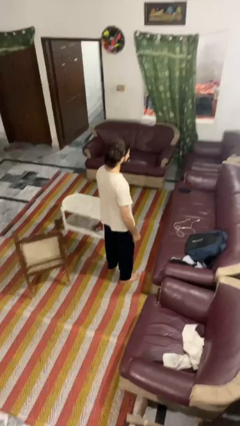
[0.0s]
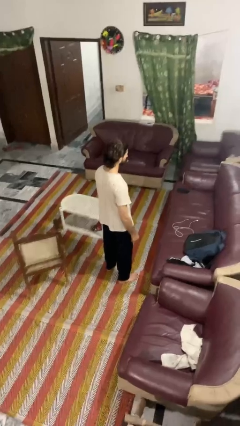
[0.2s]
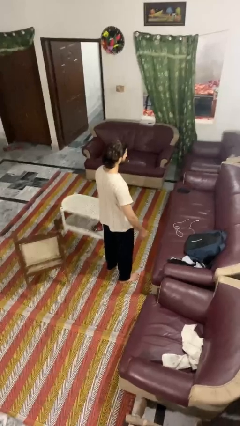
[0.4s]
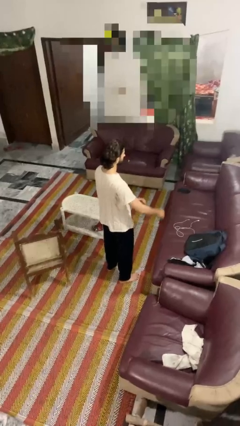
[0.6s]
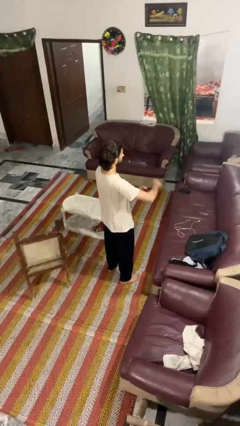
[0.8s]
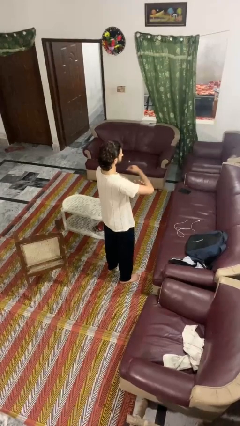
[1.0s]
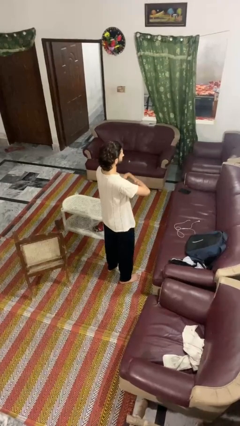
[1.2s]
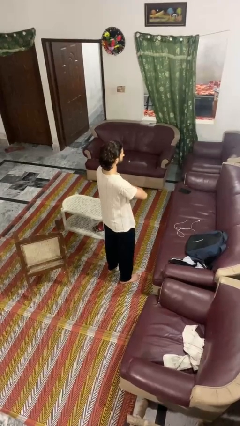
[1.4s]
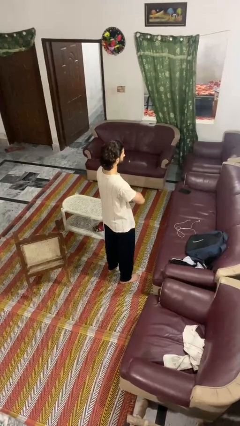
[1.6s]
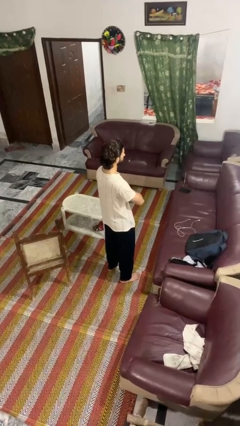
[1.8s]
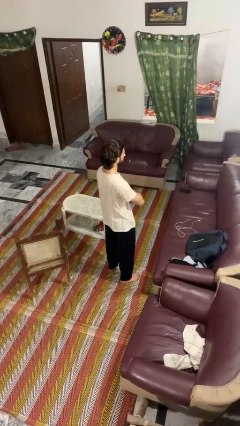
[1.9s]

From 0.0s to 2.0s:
person crosses arms

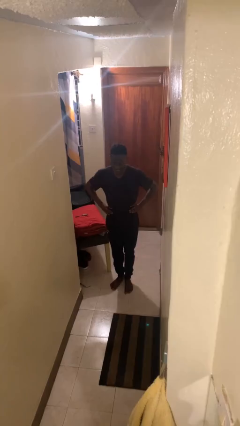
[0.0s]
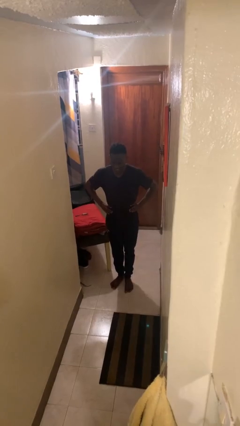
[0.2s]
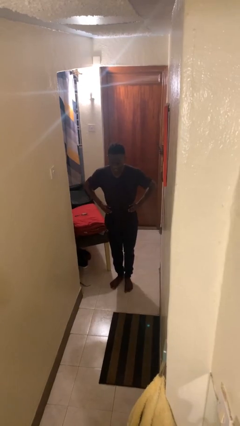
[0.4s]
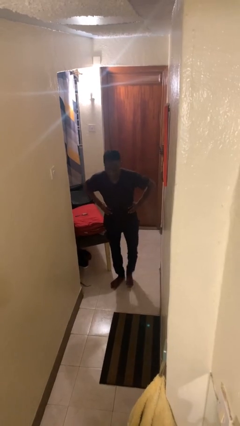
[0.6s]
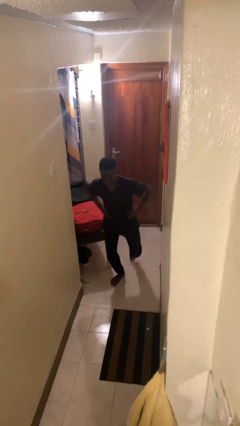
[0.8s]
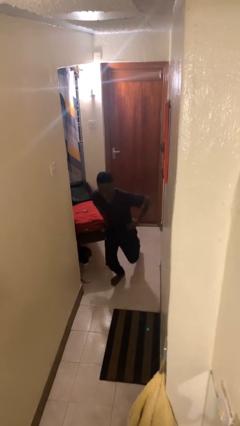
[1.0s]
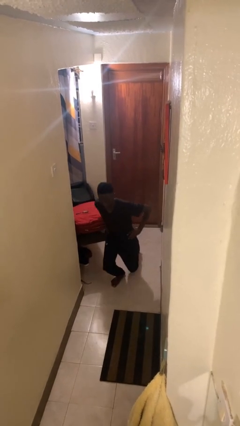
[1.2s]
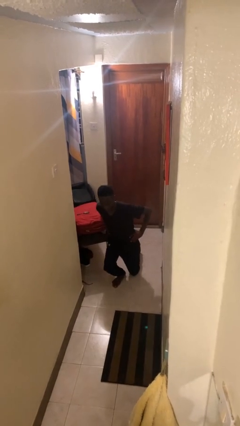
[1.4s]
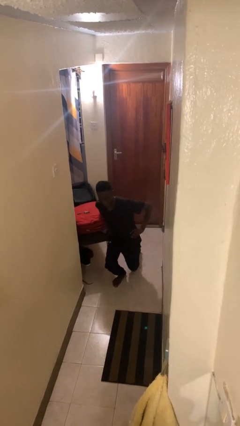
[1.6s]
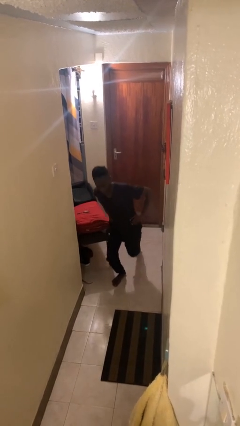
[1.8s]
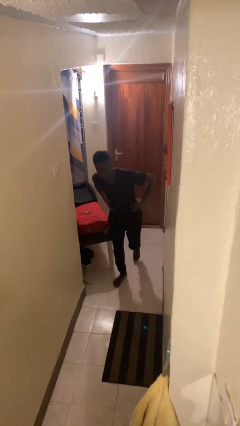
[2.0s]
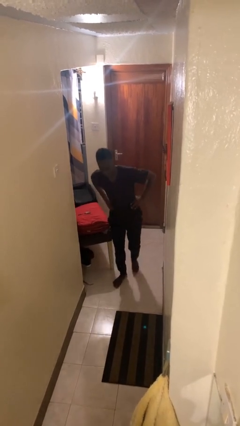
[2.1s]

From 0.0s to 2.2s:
person exercises with lunges

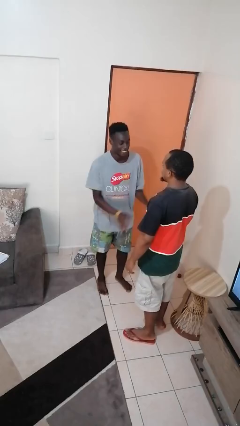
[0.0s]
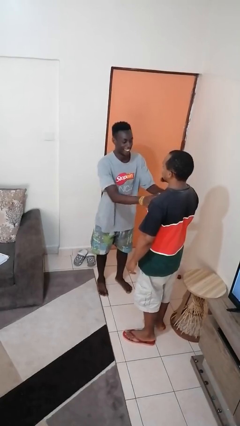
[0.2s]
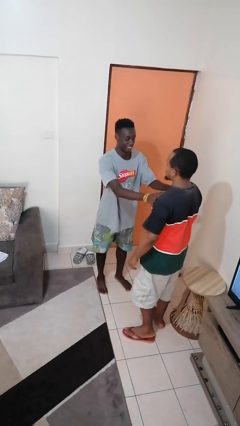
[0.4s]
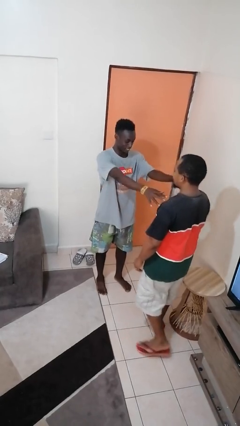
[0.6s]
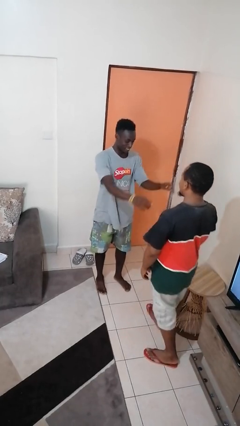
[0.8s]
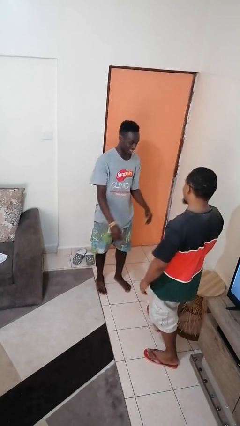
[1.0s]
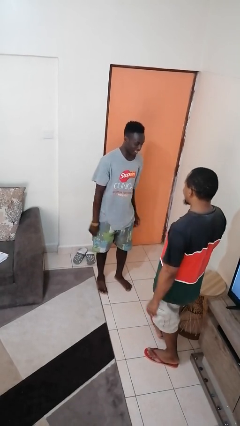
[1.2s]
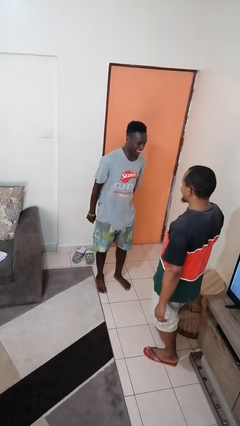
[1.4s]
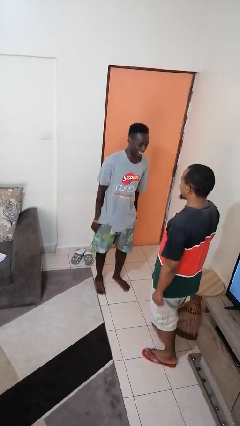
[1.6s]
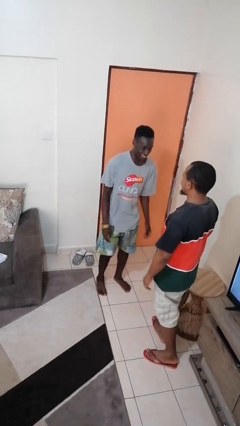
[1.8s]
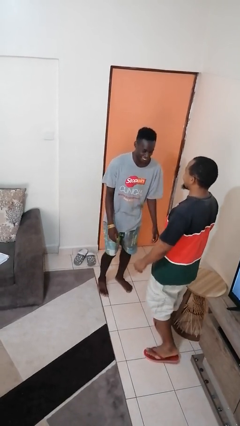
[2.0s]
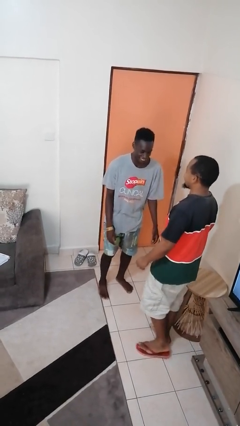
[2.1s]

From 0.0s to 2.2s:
person shoves person

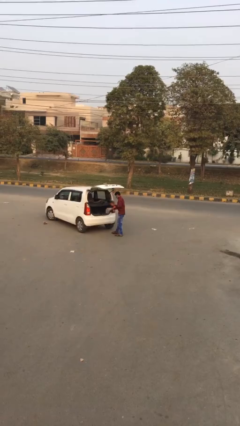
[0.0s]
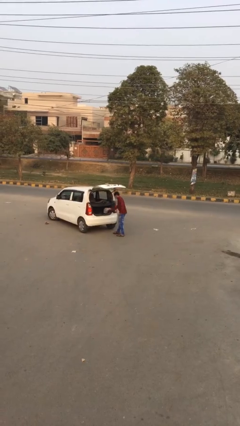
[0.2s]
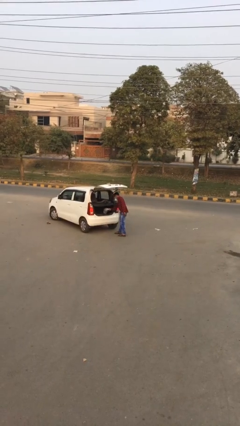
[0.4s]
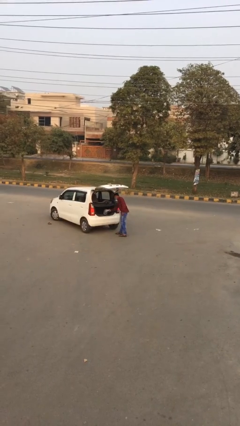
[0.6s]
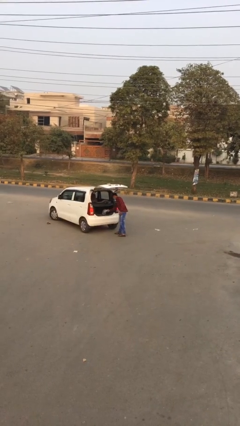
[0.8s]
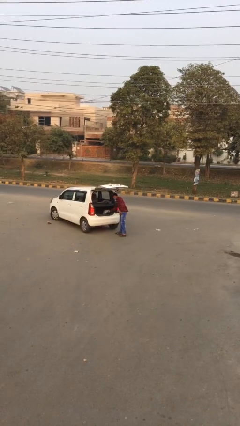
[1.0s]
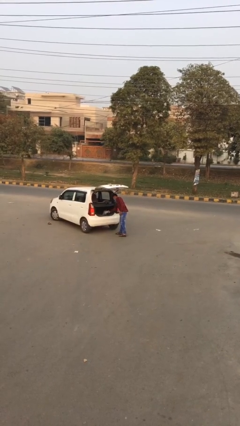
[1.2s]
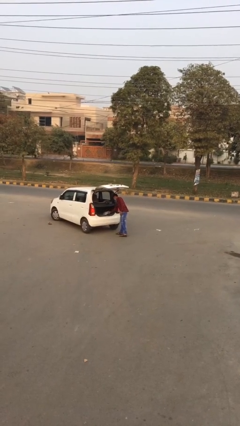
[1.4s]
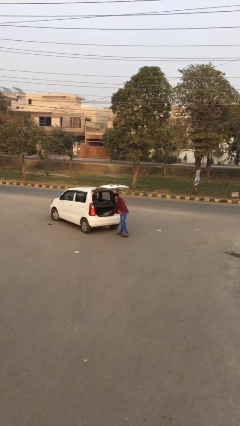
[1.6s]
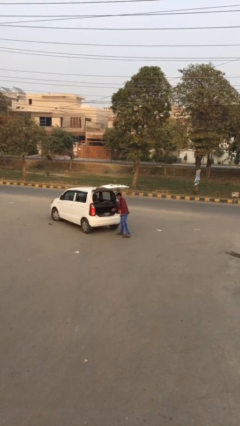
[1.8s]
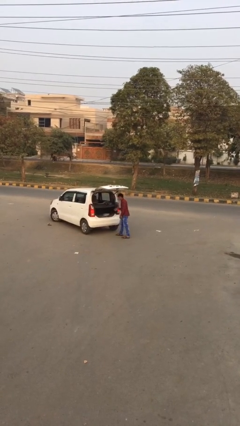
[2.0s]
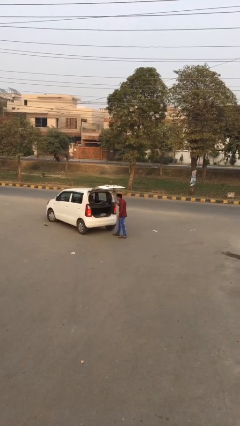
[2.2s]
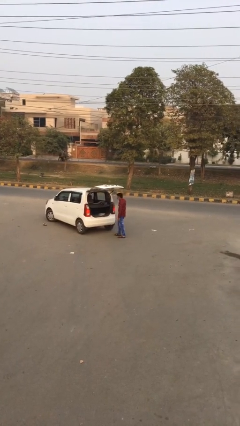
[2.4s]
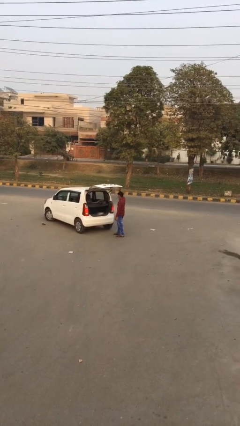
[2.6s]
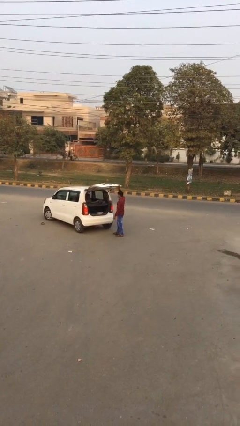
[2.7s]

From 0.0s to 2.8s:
person loads car

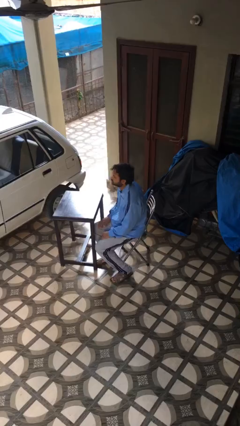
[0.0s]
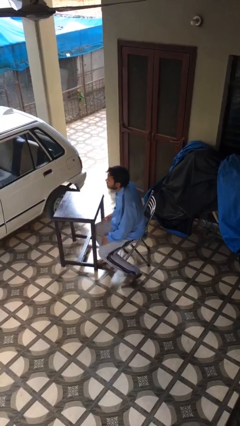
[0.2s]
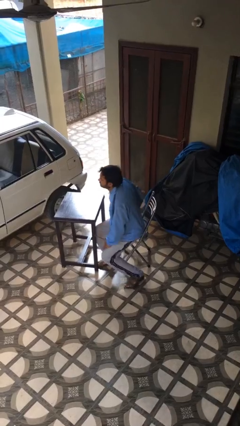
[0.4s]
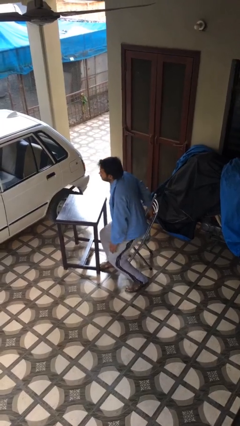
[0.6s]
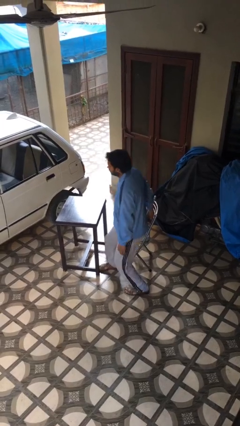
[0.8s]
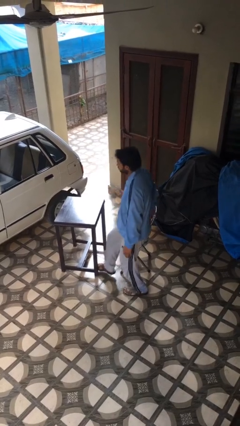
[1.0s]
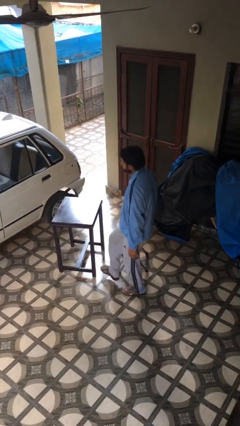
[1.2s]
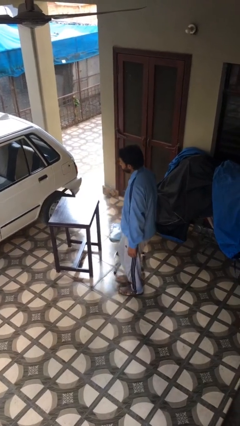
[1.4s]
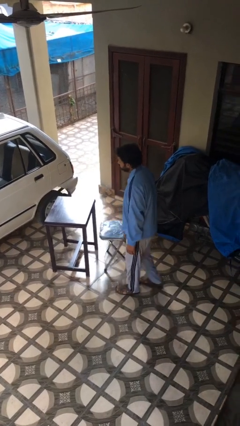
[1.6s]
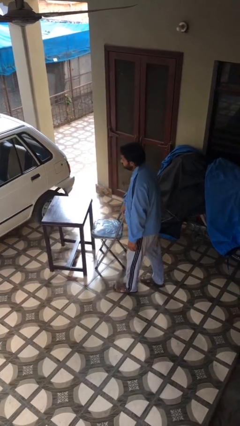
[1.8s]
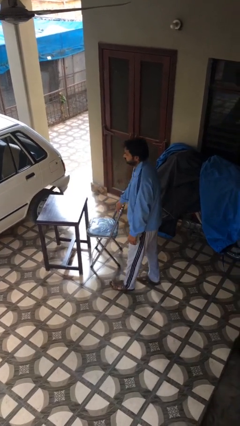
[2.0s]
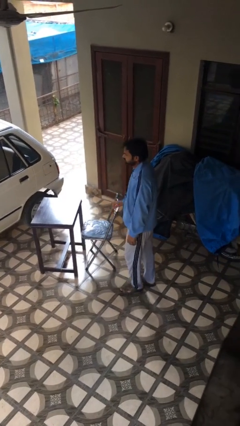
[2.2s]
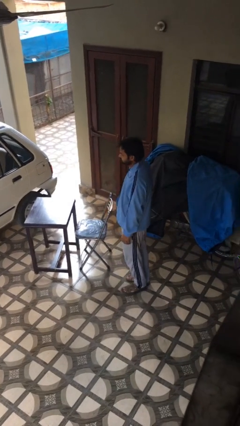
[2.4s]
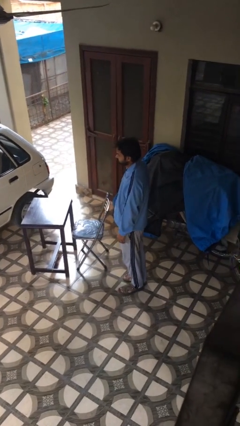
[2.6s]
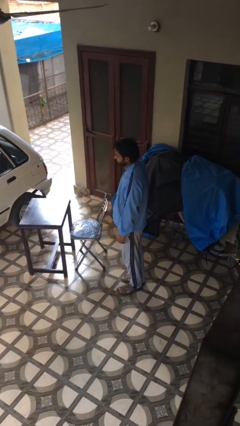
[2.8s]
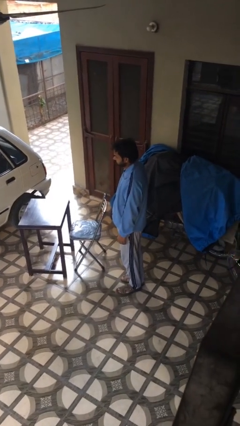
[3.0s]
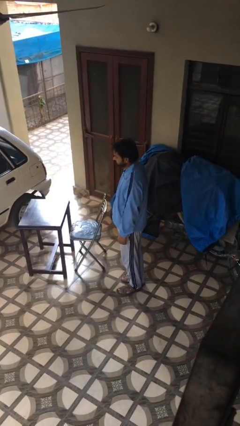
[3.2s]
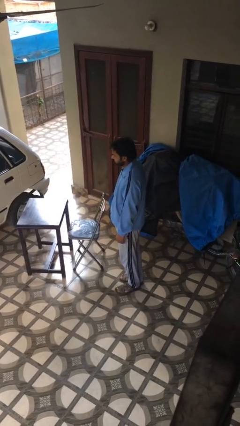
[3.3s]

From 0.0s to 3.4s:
person stands up

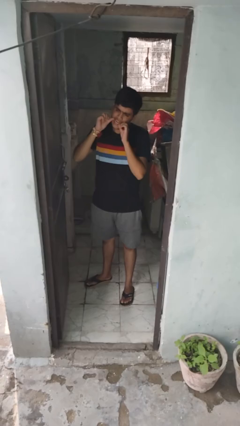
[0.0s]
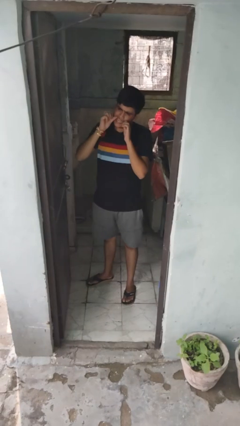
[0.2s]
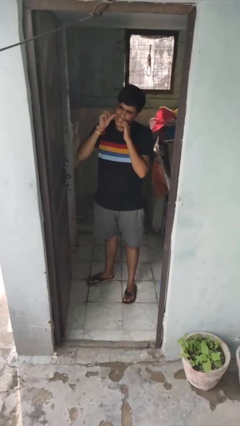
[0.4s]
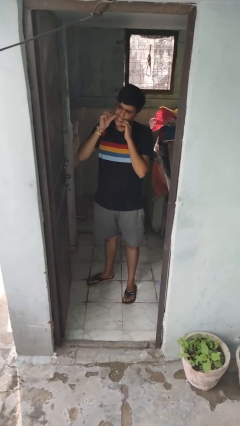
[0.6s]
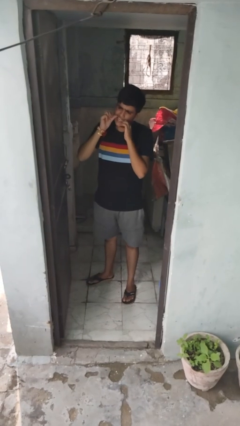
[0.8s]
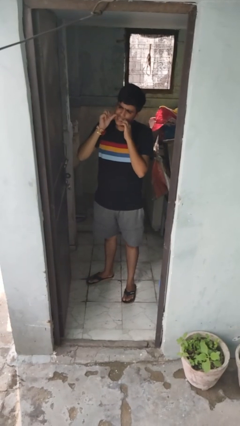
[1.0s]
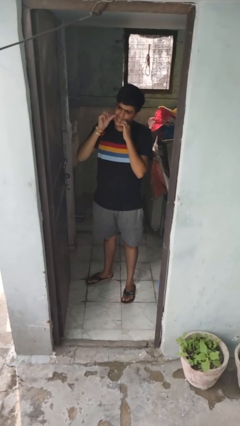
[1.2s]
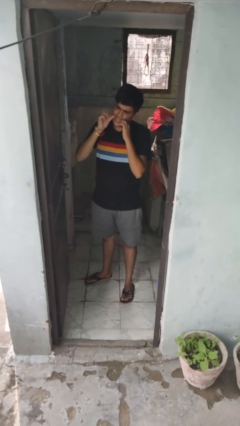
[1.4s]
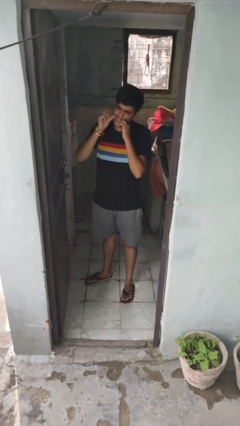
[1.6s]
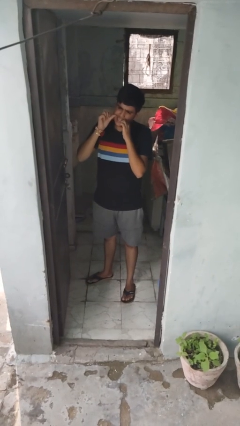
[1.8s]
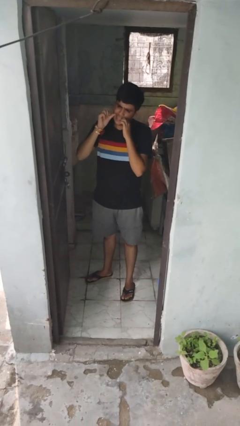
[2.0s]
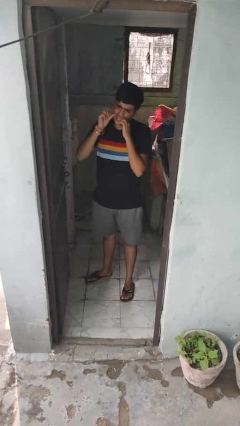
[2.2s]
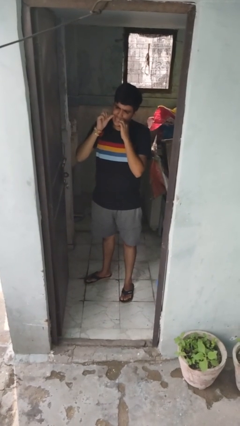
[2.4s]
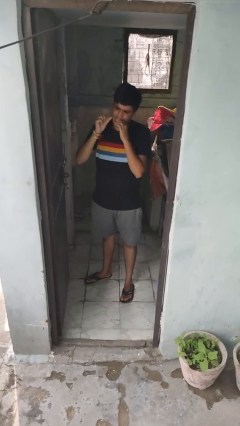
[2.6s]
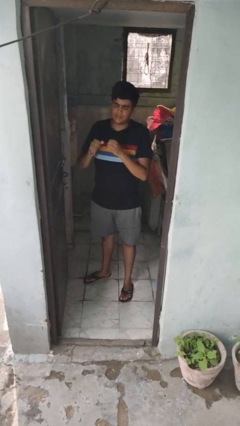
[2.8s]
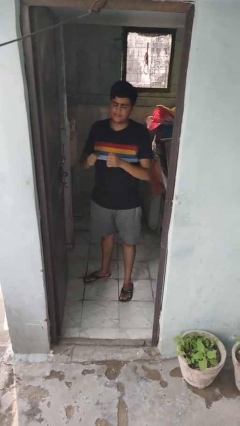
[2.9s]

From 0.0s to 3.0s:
person flosses

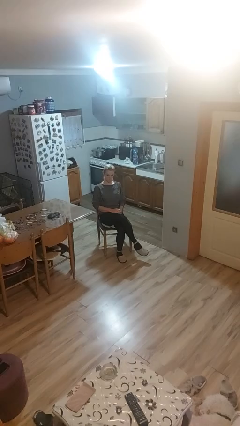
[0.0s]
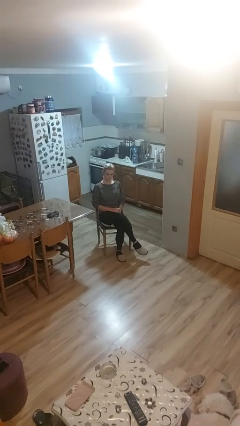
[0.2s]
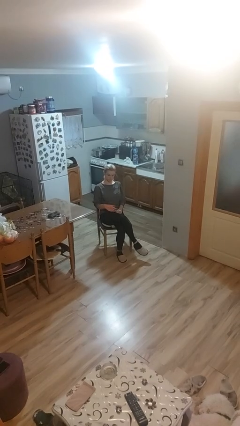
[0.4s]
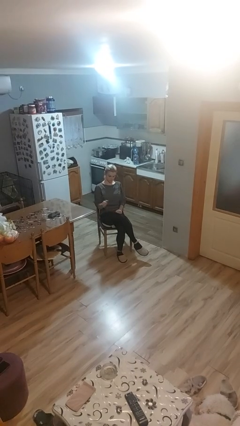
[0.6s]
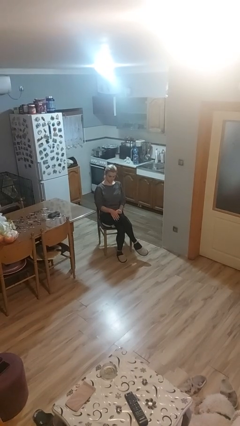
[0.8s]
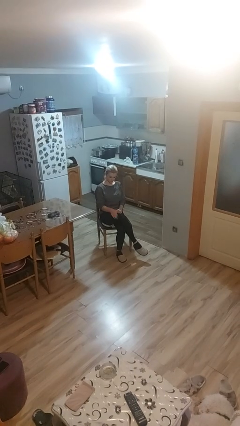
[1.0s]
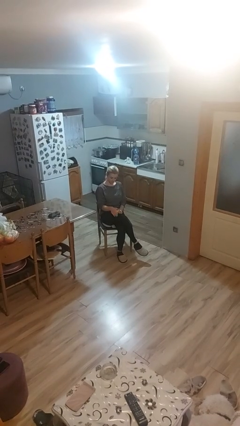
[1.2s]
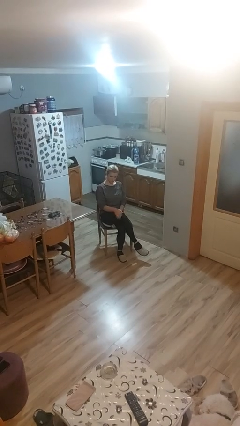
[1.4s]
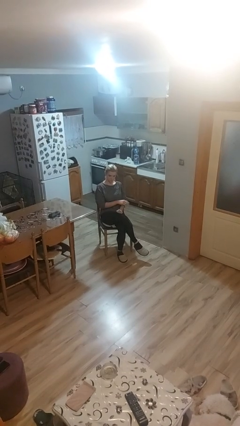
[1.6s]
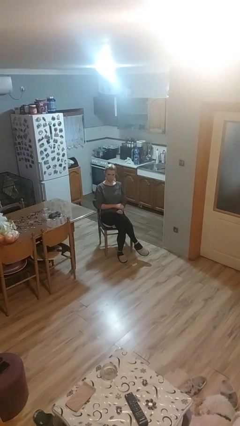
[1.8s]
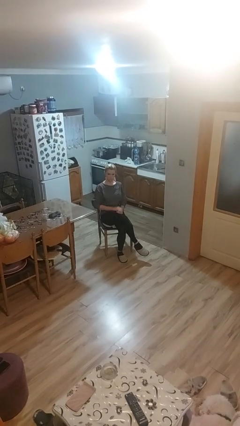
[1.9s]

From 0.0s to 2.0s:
person slaps hands on thighs
